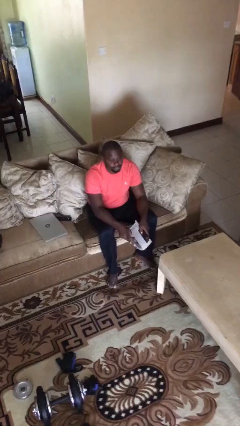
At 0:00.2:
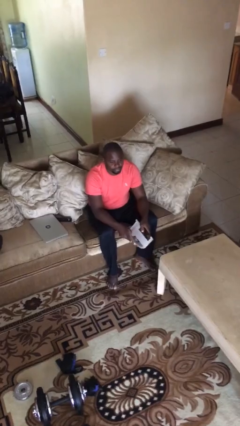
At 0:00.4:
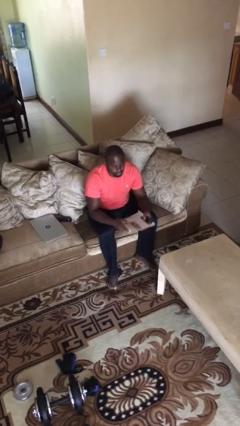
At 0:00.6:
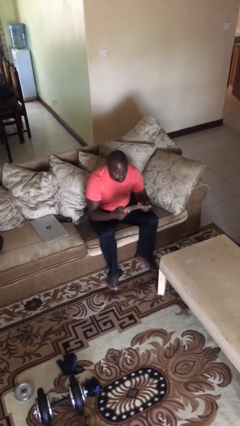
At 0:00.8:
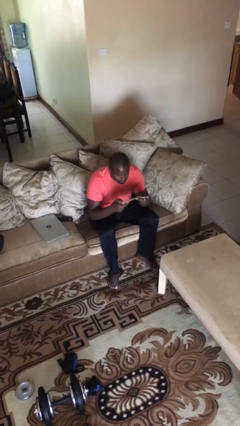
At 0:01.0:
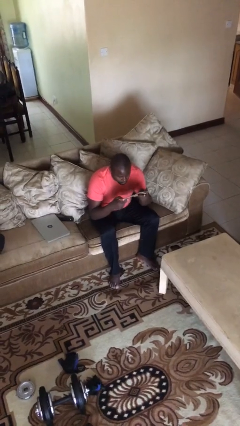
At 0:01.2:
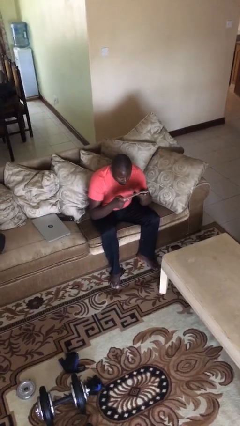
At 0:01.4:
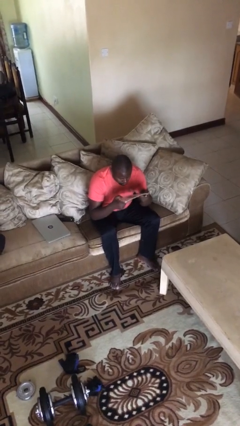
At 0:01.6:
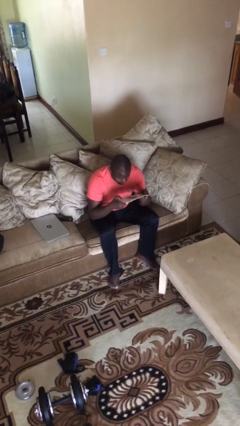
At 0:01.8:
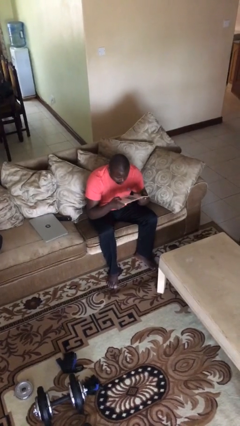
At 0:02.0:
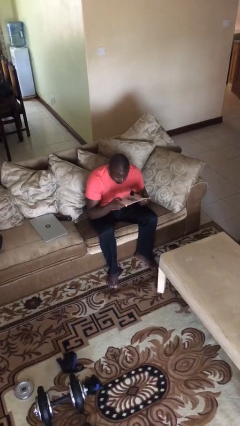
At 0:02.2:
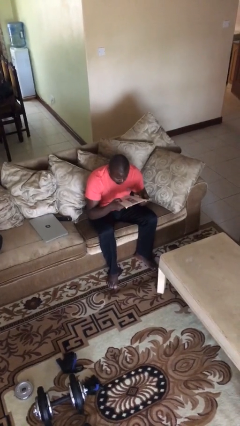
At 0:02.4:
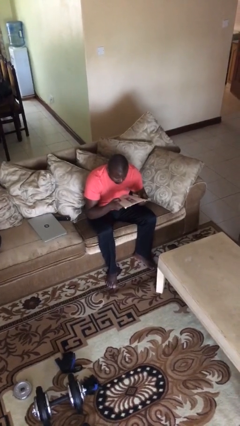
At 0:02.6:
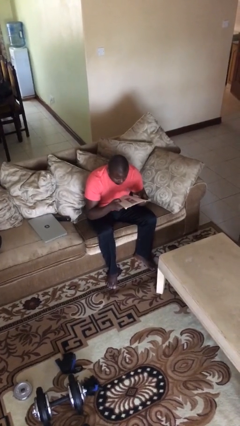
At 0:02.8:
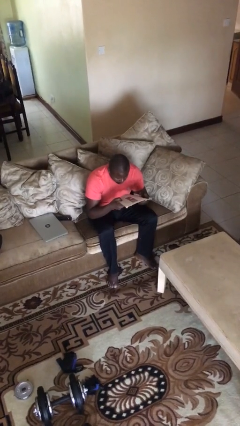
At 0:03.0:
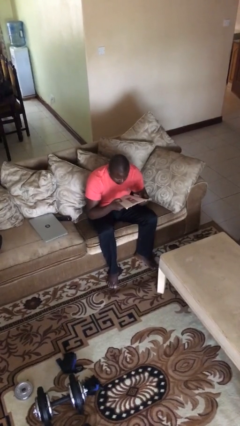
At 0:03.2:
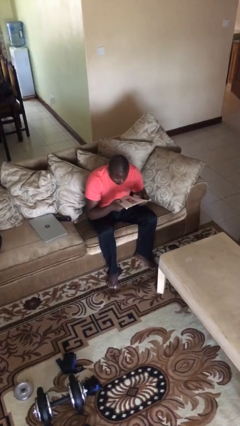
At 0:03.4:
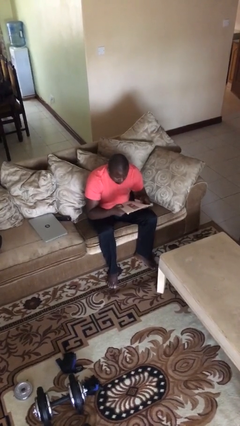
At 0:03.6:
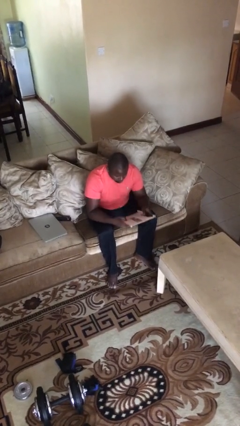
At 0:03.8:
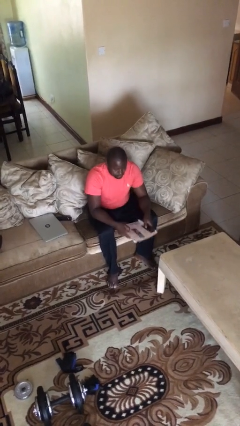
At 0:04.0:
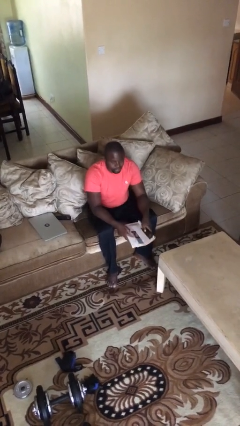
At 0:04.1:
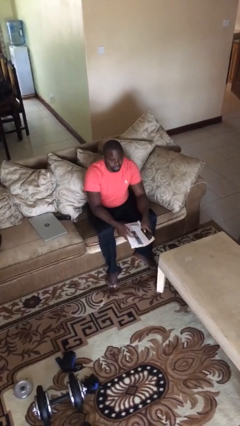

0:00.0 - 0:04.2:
person reads document

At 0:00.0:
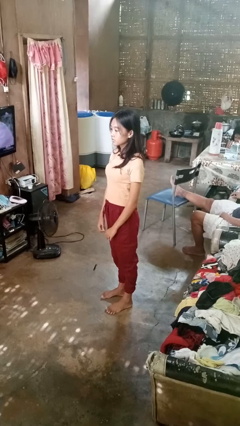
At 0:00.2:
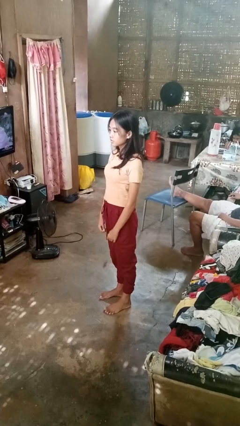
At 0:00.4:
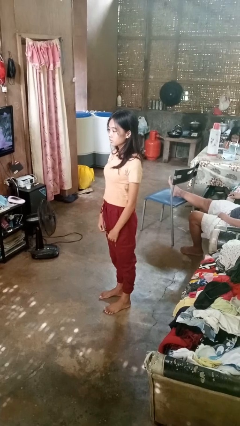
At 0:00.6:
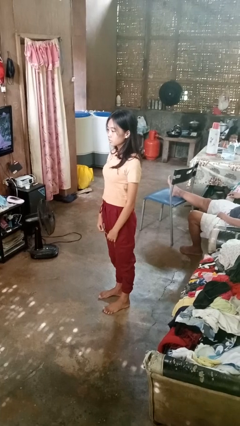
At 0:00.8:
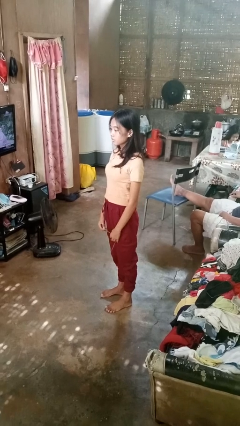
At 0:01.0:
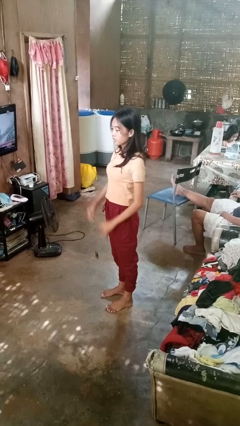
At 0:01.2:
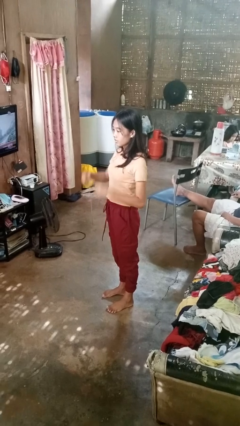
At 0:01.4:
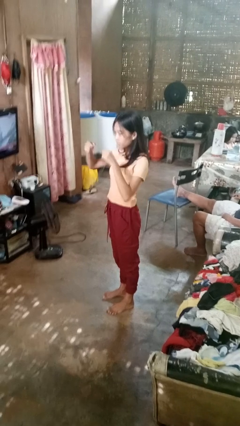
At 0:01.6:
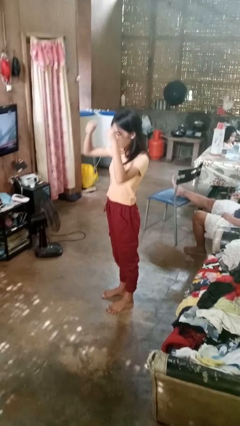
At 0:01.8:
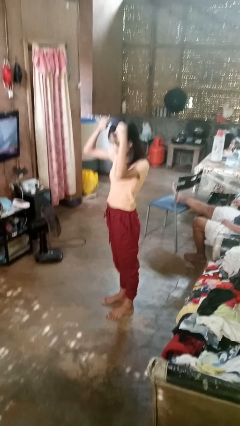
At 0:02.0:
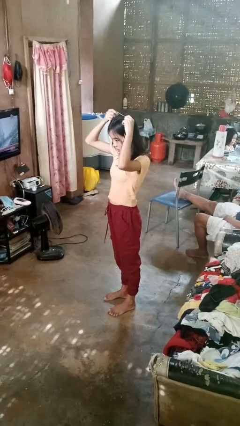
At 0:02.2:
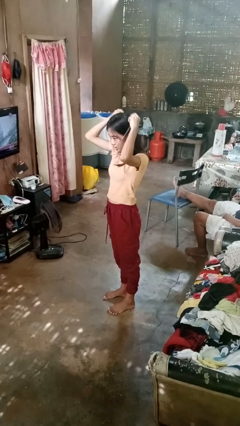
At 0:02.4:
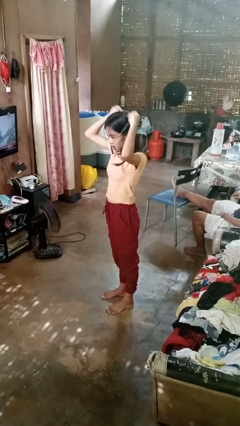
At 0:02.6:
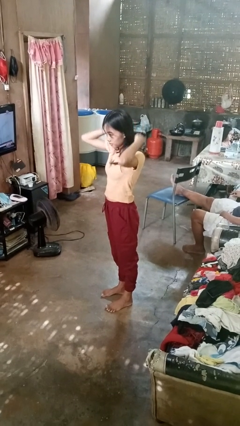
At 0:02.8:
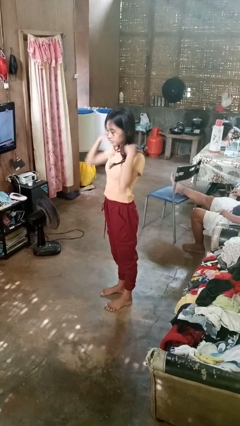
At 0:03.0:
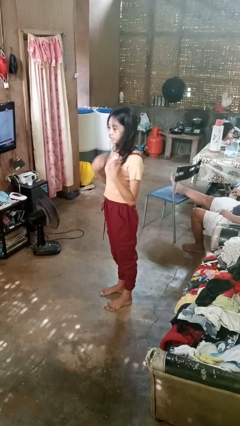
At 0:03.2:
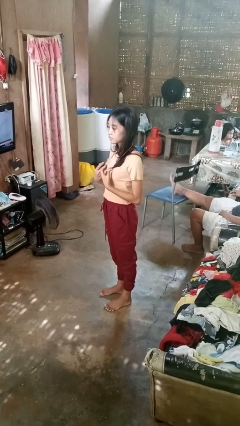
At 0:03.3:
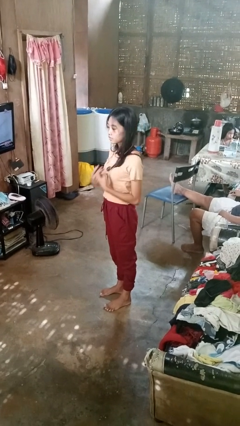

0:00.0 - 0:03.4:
person takes off belt

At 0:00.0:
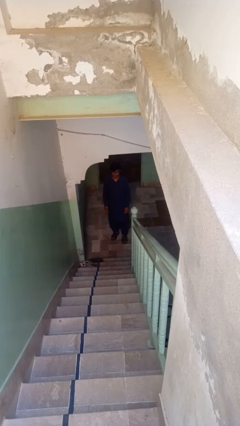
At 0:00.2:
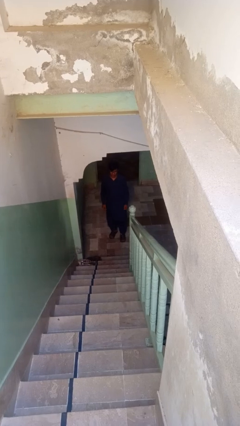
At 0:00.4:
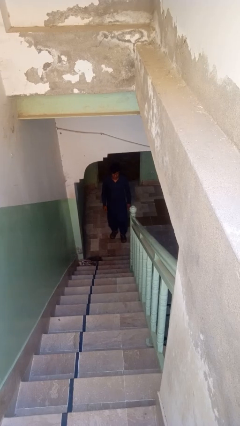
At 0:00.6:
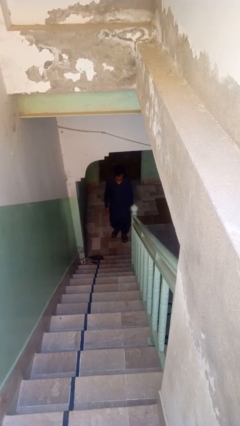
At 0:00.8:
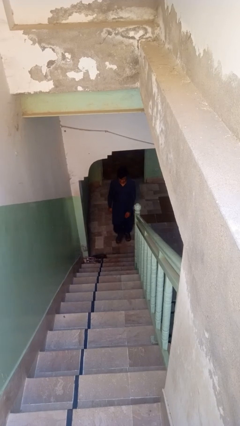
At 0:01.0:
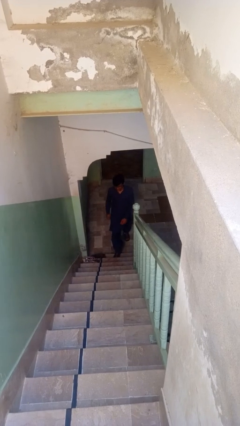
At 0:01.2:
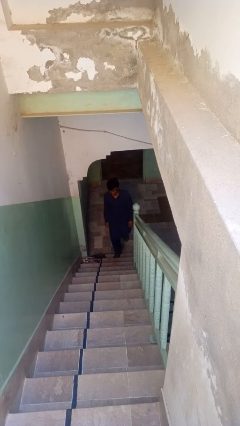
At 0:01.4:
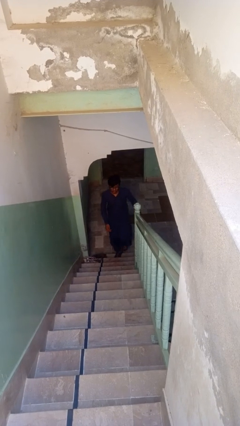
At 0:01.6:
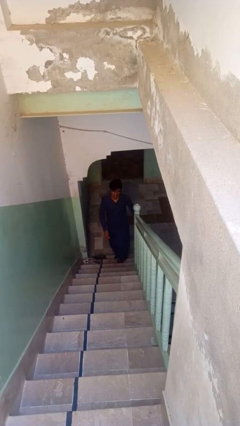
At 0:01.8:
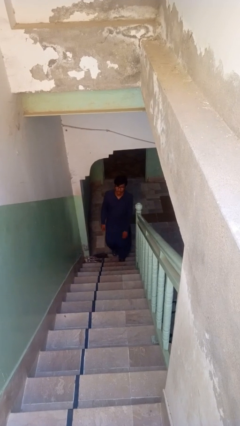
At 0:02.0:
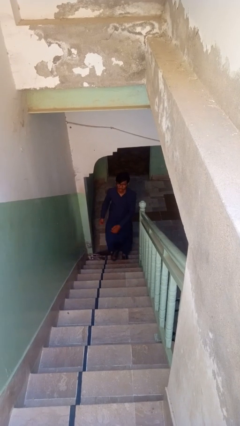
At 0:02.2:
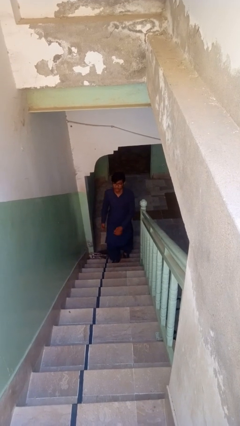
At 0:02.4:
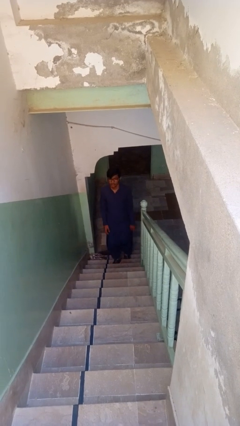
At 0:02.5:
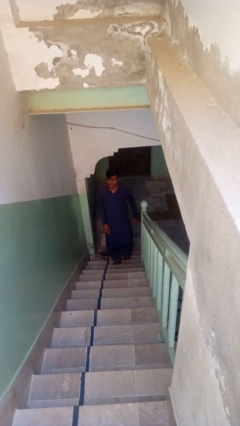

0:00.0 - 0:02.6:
person climbs up stairs

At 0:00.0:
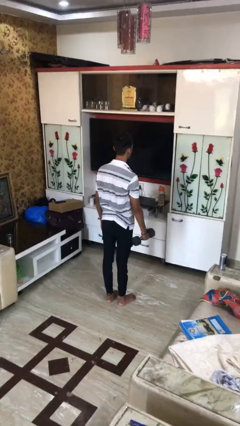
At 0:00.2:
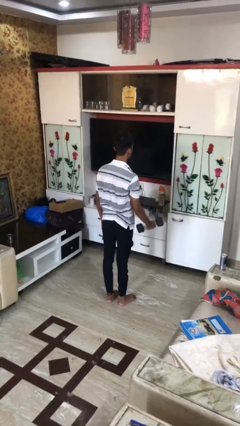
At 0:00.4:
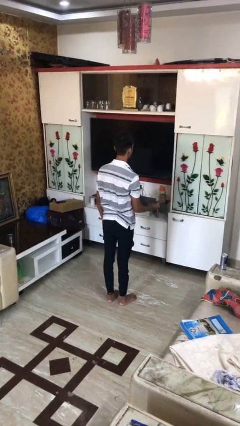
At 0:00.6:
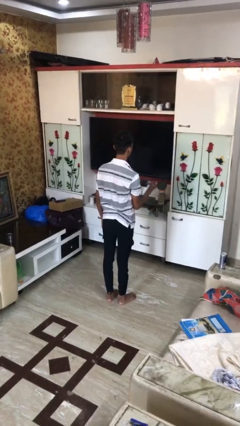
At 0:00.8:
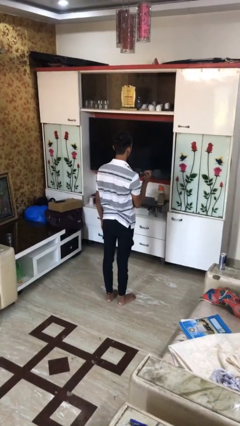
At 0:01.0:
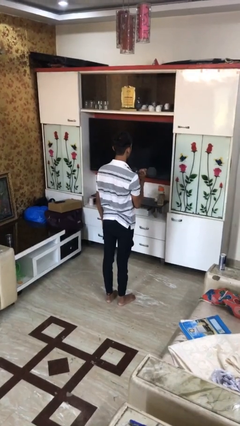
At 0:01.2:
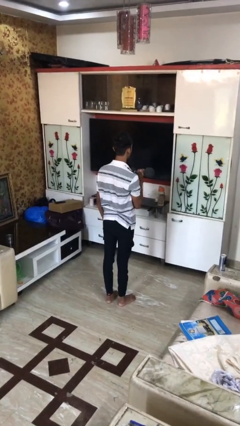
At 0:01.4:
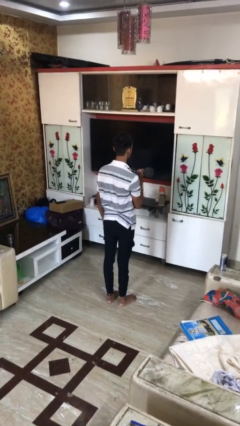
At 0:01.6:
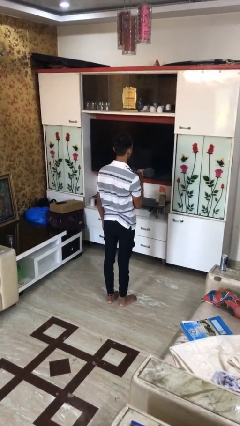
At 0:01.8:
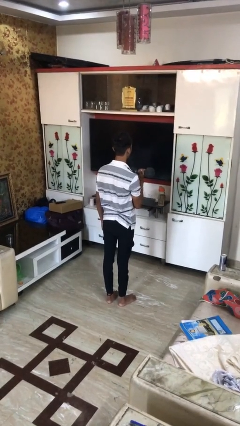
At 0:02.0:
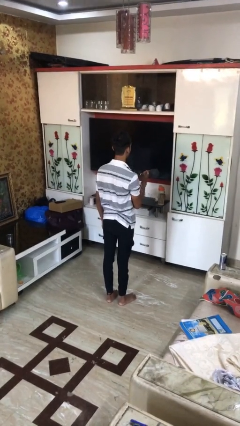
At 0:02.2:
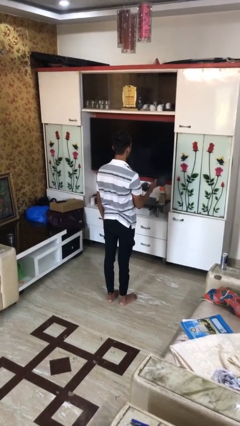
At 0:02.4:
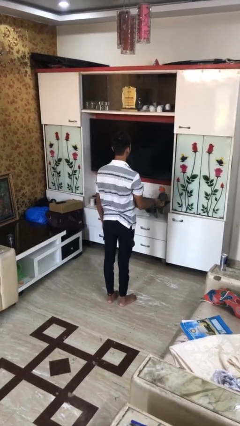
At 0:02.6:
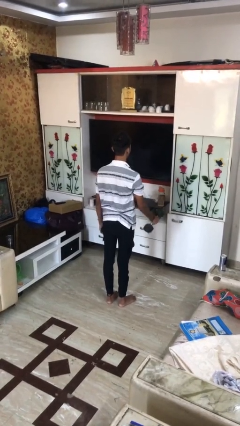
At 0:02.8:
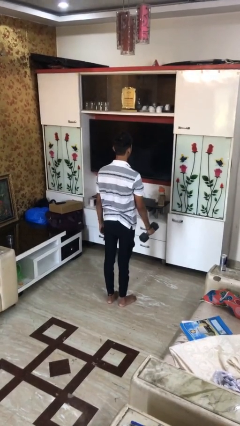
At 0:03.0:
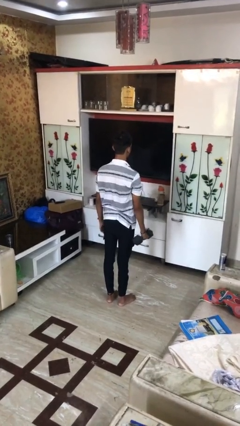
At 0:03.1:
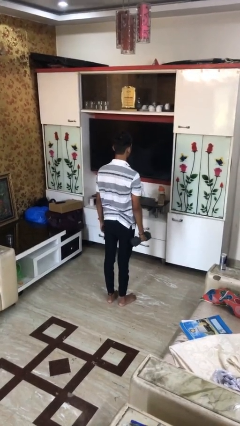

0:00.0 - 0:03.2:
person lifts dumbbells

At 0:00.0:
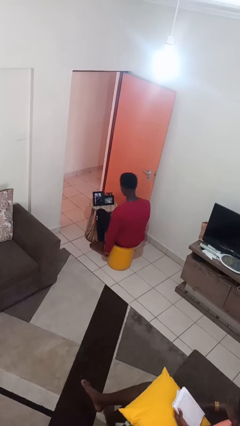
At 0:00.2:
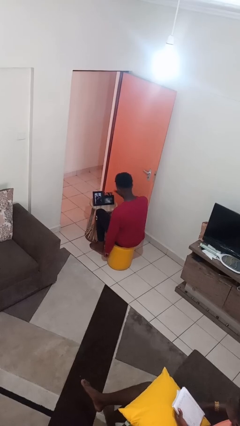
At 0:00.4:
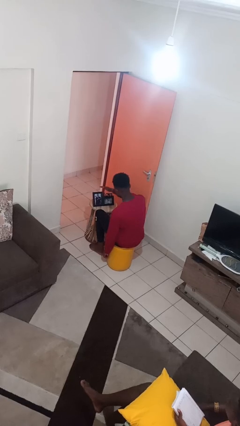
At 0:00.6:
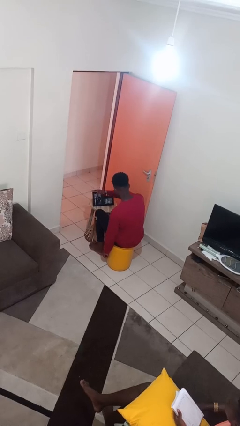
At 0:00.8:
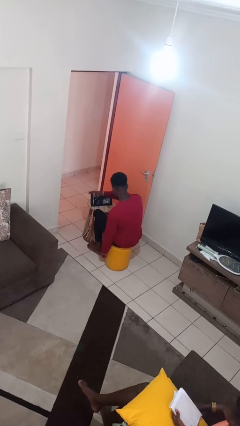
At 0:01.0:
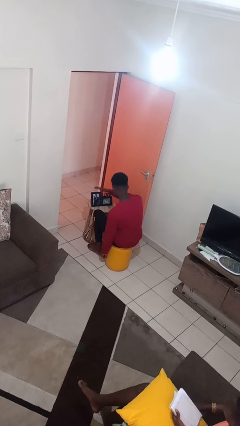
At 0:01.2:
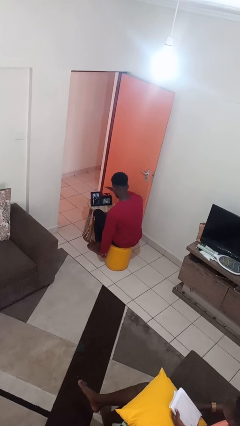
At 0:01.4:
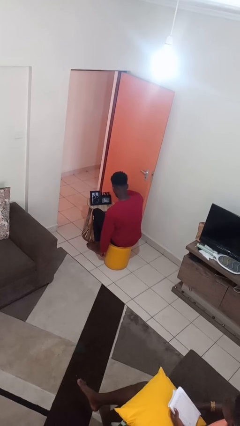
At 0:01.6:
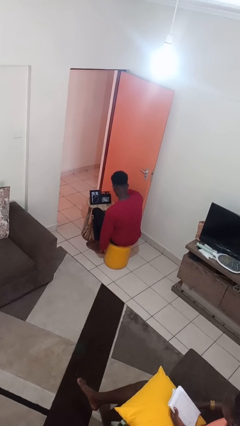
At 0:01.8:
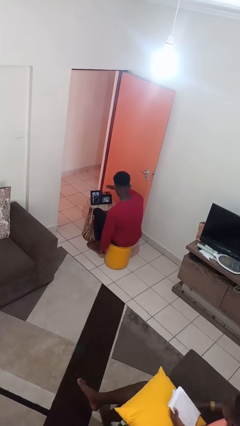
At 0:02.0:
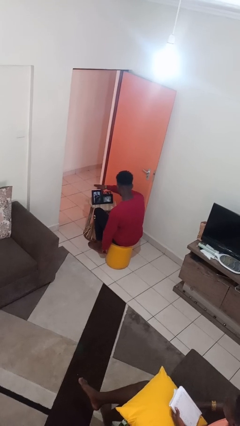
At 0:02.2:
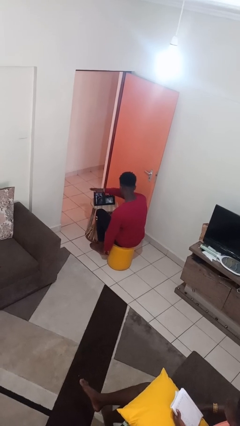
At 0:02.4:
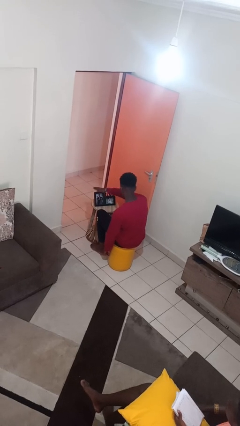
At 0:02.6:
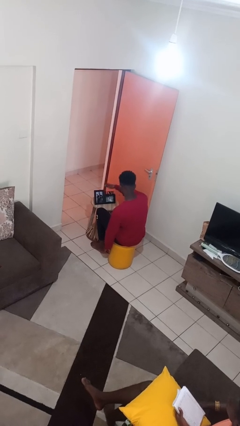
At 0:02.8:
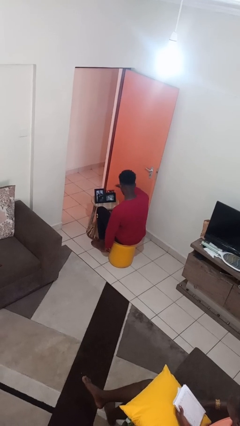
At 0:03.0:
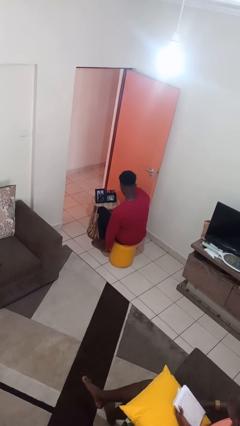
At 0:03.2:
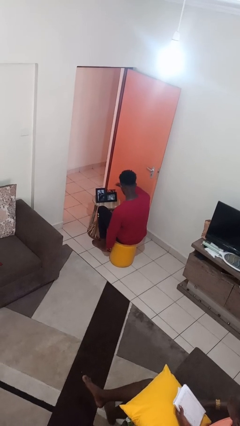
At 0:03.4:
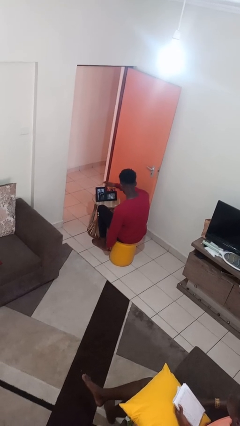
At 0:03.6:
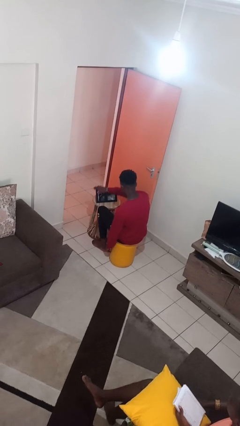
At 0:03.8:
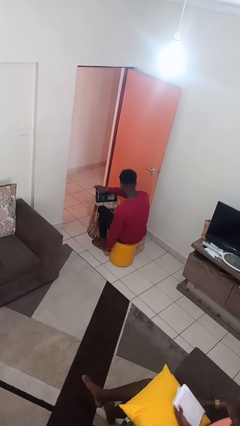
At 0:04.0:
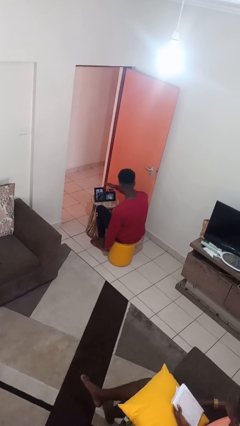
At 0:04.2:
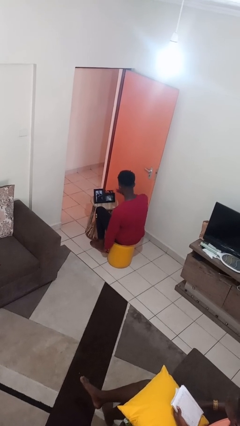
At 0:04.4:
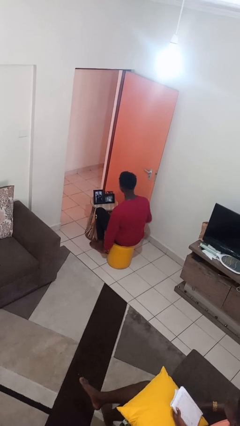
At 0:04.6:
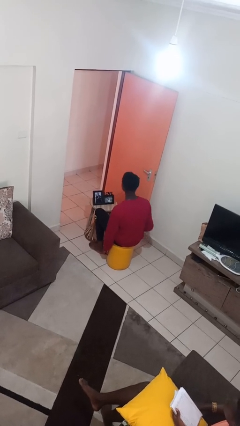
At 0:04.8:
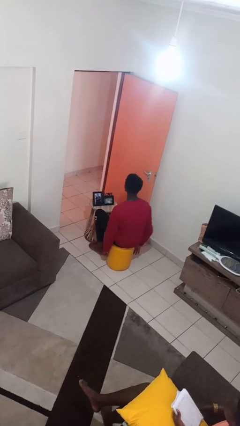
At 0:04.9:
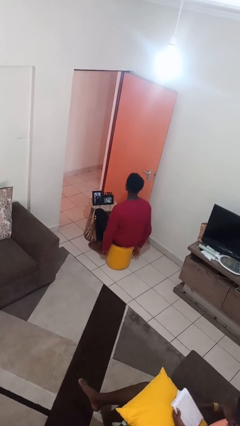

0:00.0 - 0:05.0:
person waves hand over object
